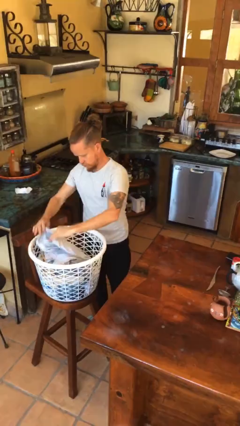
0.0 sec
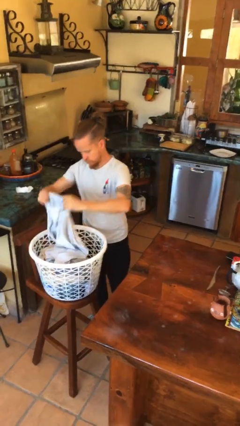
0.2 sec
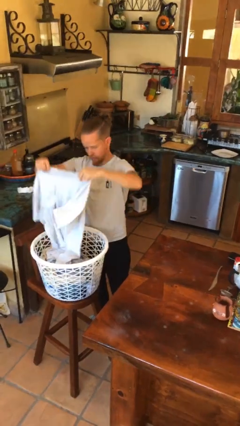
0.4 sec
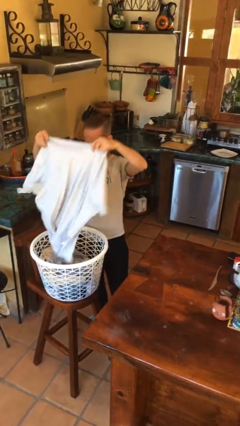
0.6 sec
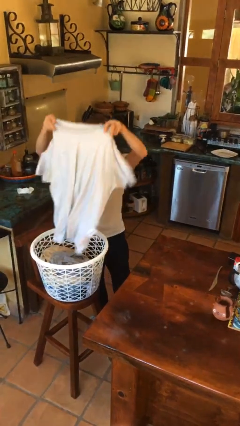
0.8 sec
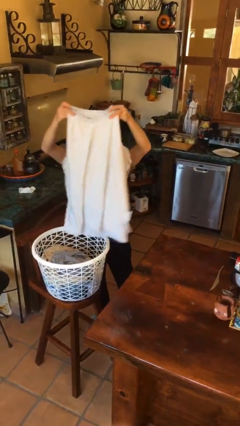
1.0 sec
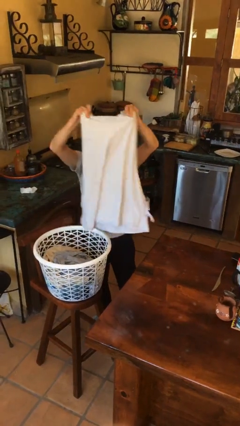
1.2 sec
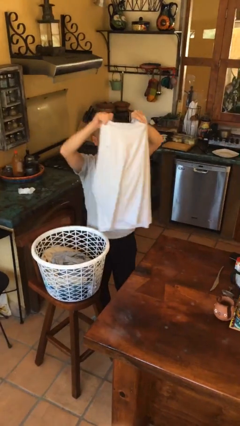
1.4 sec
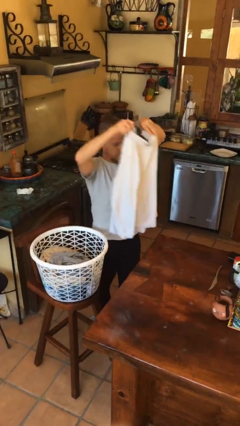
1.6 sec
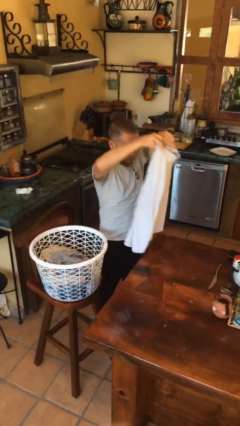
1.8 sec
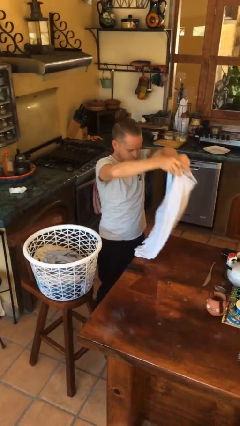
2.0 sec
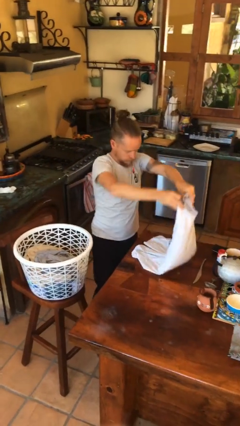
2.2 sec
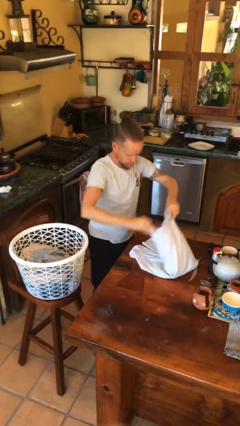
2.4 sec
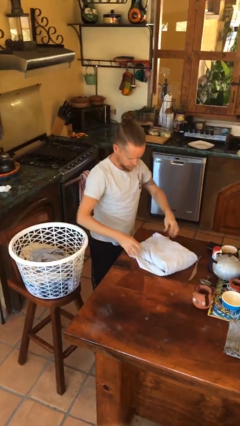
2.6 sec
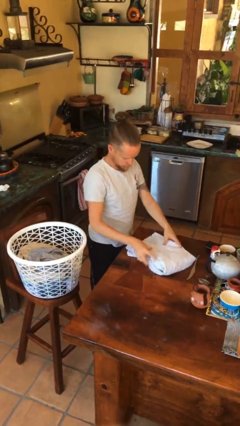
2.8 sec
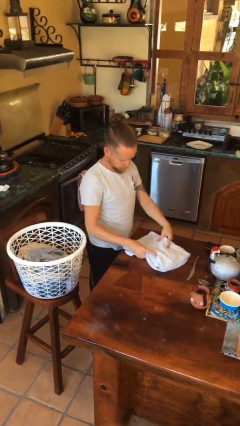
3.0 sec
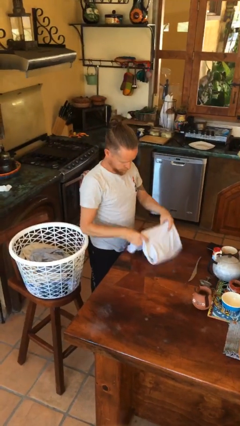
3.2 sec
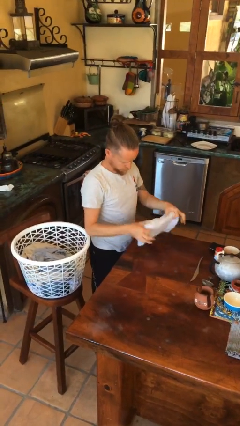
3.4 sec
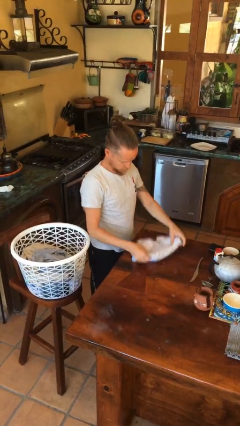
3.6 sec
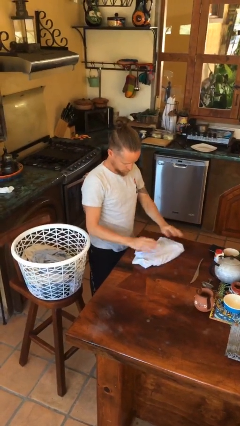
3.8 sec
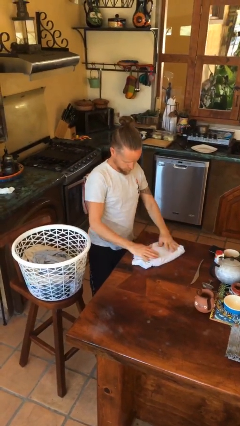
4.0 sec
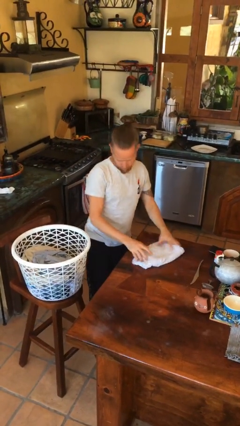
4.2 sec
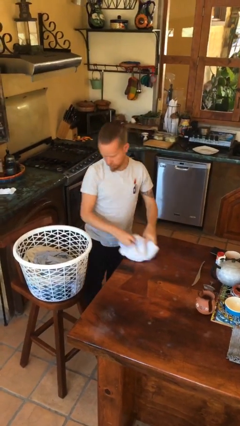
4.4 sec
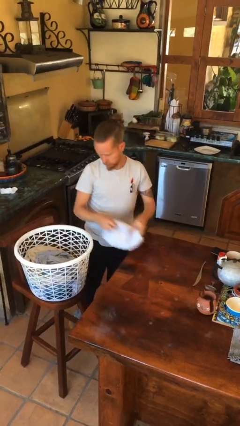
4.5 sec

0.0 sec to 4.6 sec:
person folds shirt

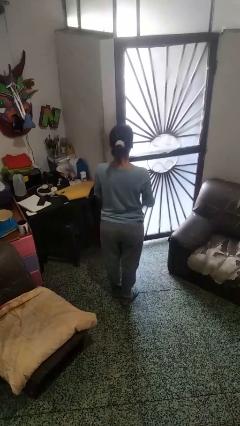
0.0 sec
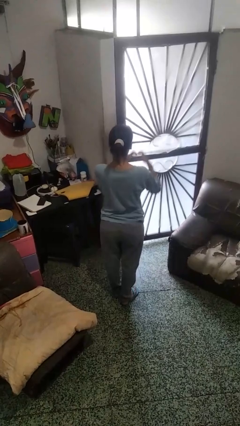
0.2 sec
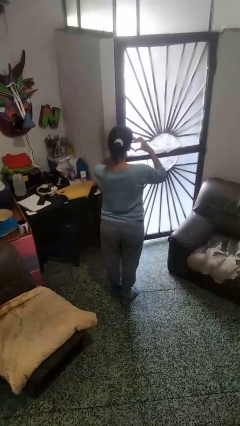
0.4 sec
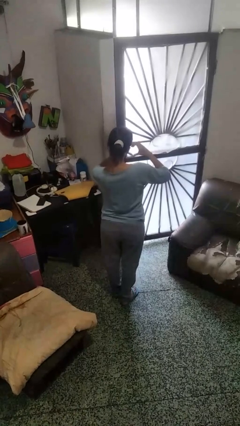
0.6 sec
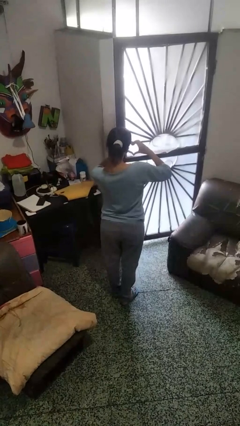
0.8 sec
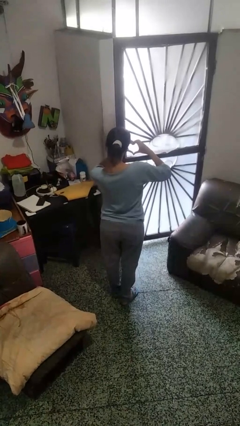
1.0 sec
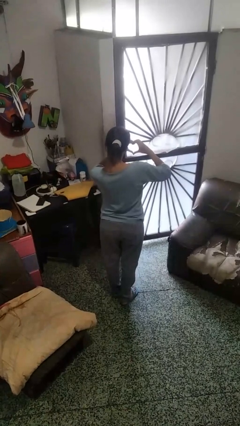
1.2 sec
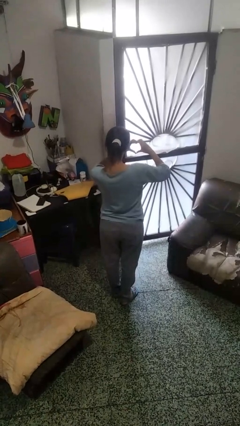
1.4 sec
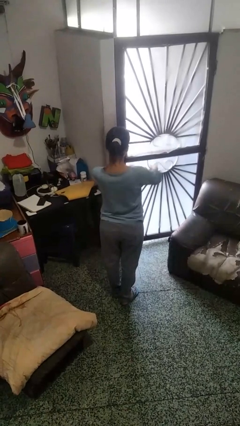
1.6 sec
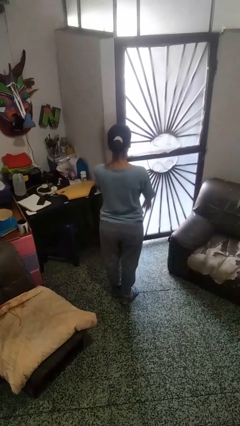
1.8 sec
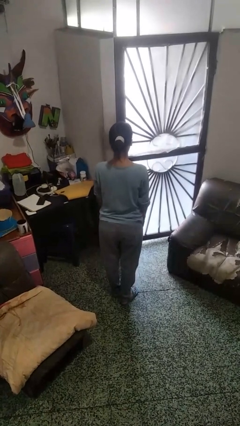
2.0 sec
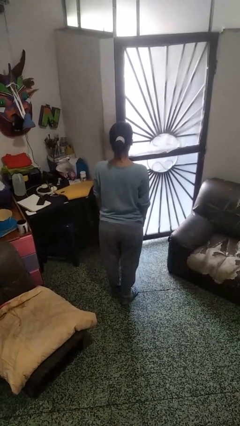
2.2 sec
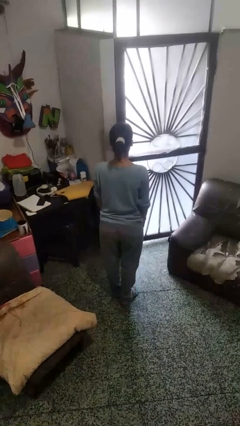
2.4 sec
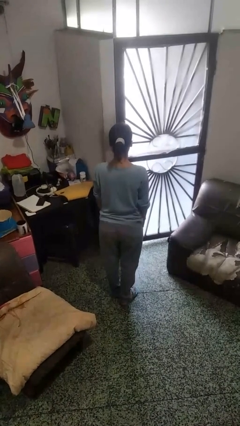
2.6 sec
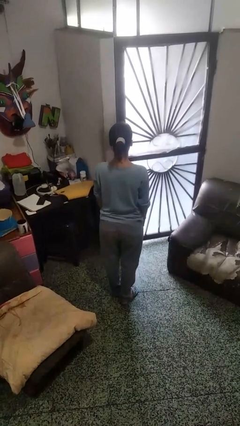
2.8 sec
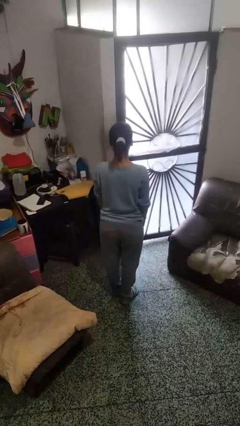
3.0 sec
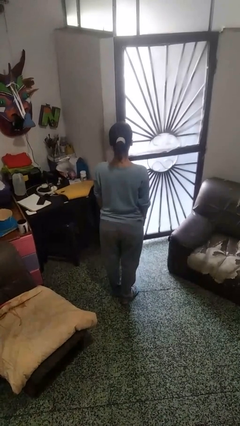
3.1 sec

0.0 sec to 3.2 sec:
person gestures heart

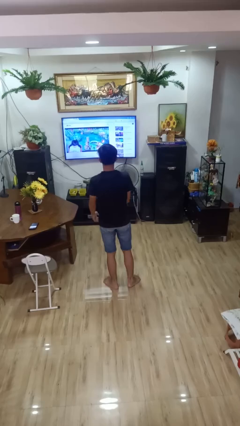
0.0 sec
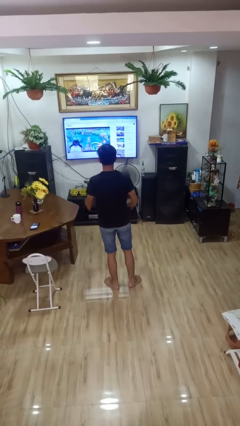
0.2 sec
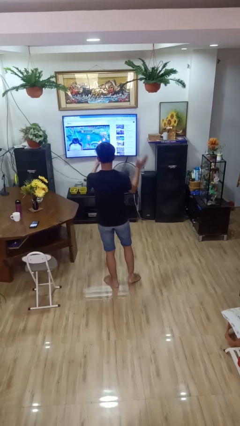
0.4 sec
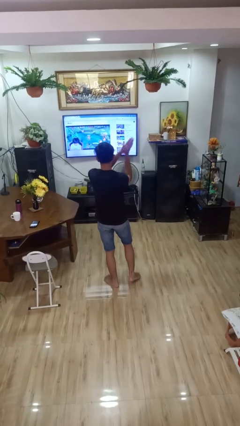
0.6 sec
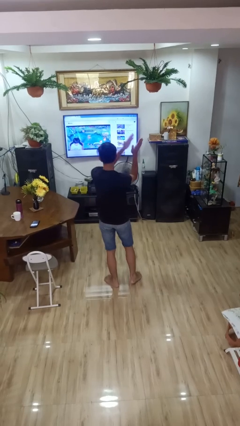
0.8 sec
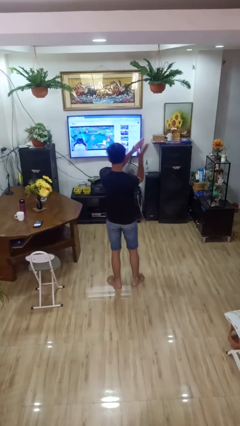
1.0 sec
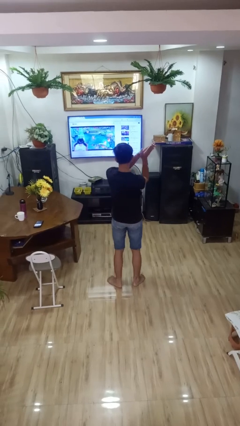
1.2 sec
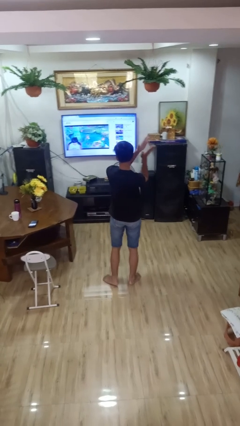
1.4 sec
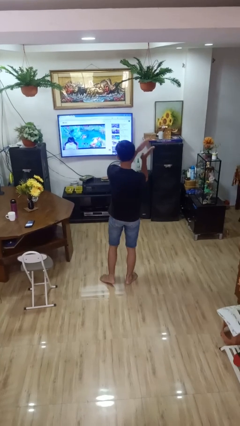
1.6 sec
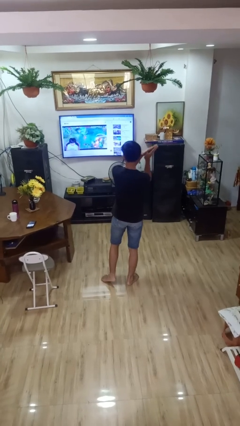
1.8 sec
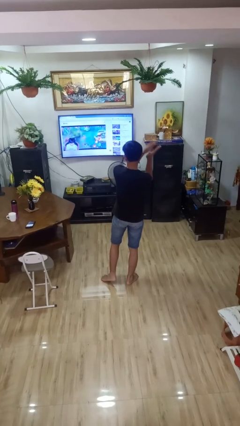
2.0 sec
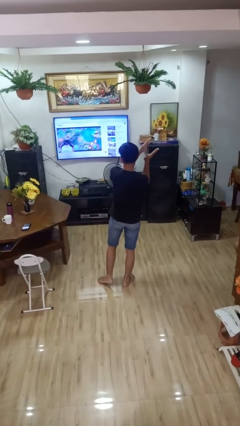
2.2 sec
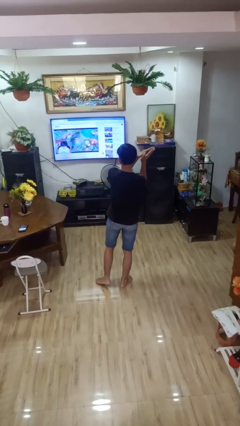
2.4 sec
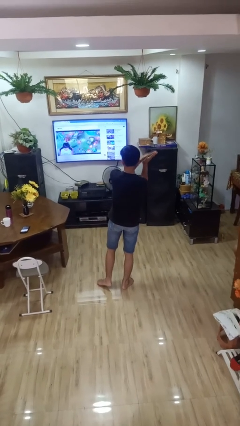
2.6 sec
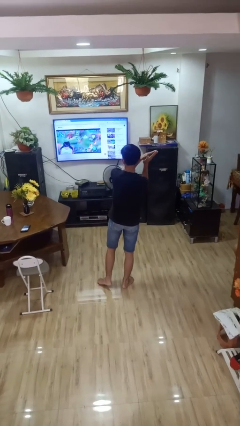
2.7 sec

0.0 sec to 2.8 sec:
person claps hands

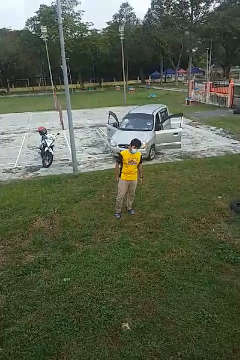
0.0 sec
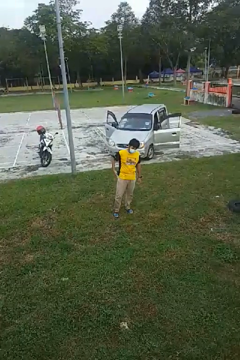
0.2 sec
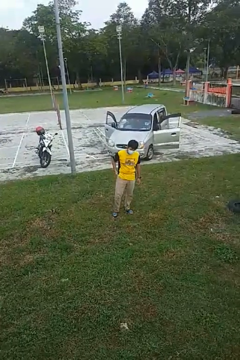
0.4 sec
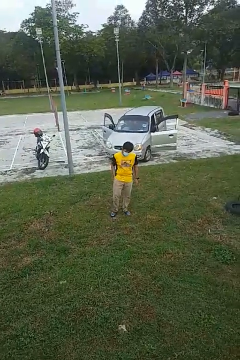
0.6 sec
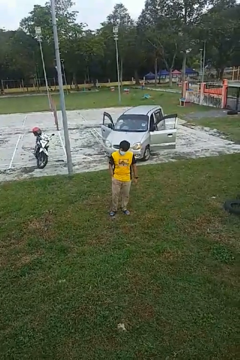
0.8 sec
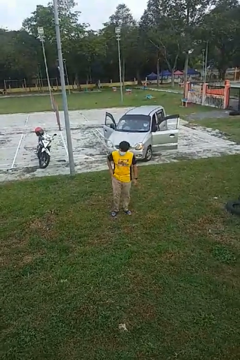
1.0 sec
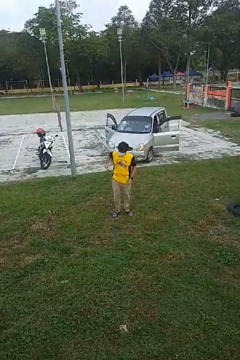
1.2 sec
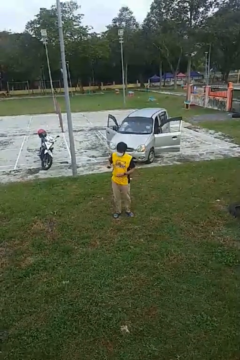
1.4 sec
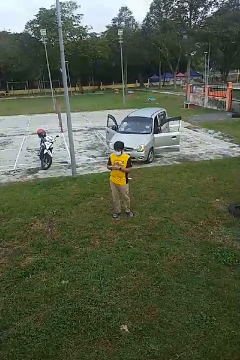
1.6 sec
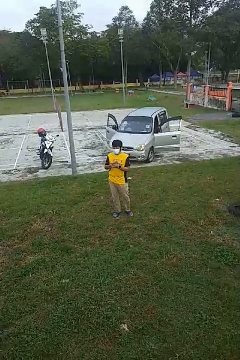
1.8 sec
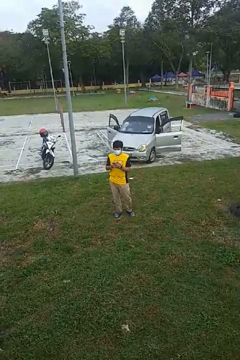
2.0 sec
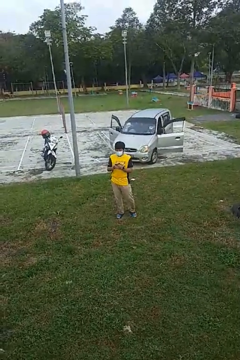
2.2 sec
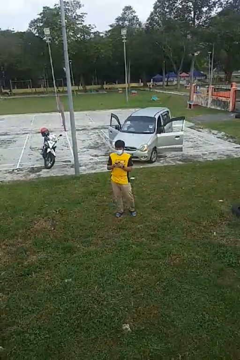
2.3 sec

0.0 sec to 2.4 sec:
person takes phone from pocket

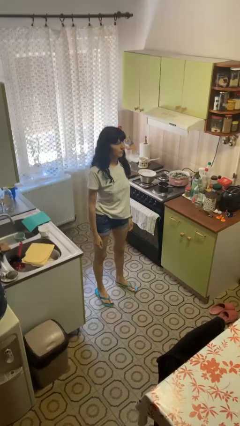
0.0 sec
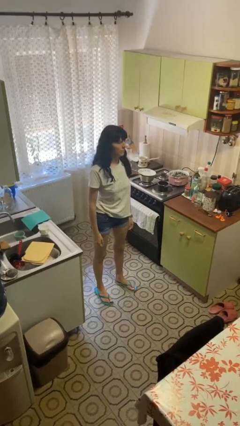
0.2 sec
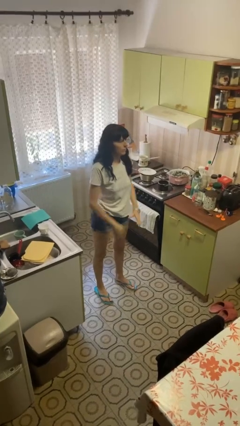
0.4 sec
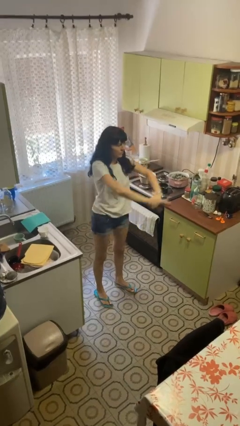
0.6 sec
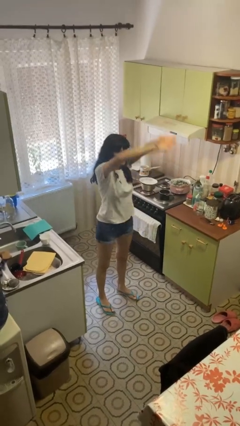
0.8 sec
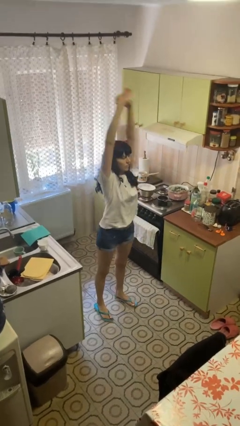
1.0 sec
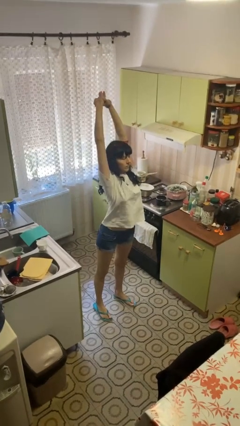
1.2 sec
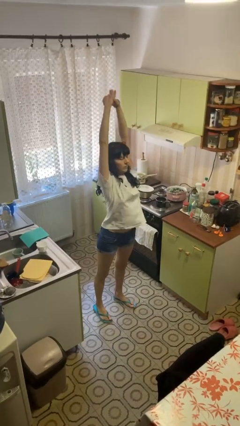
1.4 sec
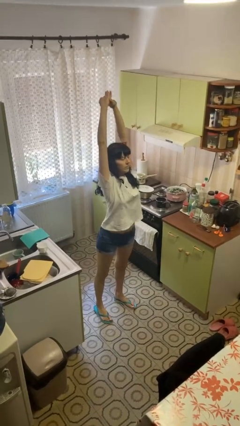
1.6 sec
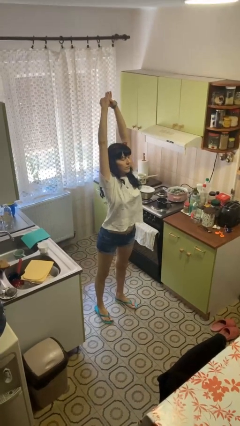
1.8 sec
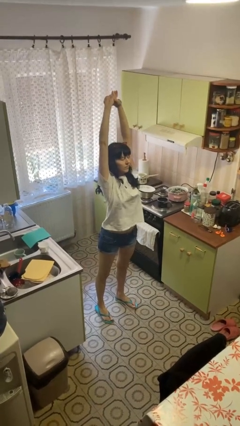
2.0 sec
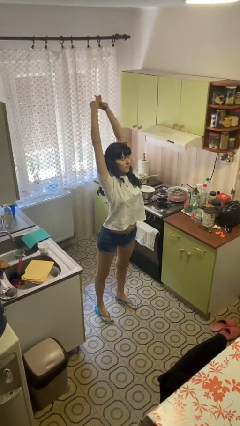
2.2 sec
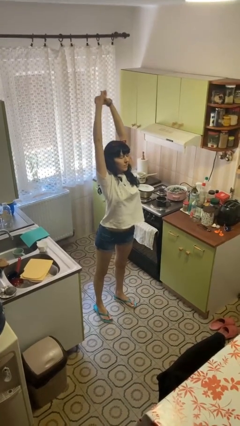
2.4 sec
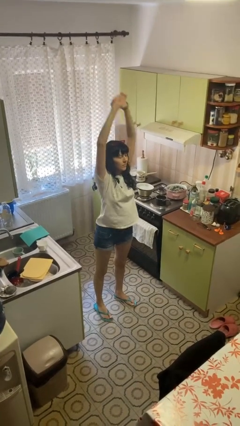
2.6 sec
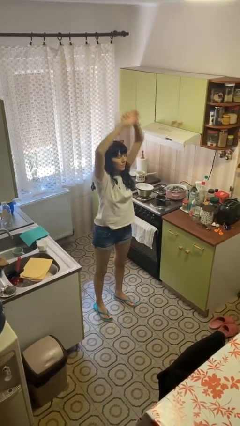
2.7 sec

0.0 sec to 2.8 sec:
person stretches arms over head

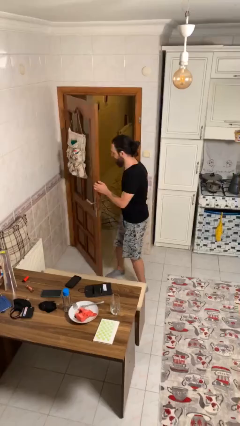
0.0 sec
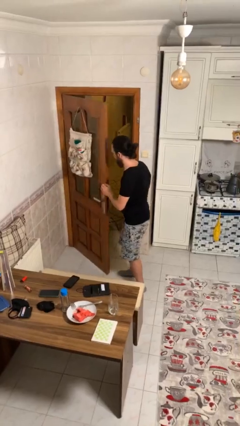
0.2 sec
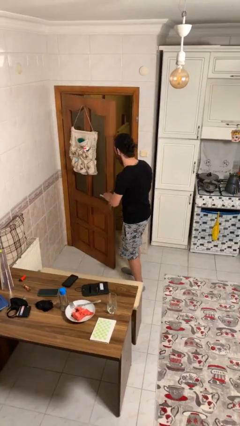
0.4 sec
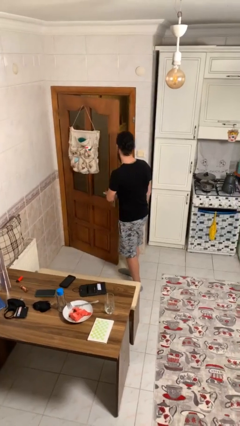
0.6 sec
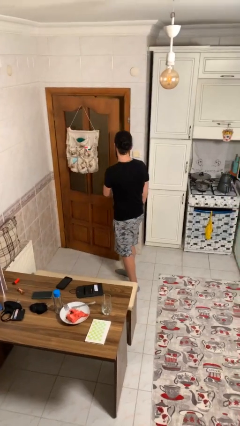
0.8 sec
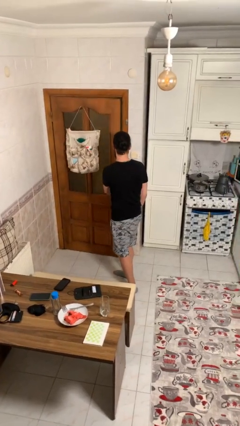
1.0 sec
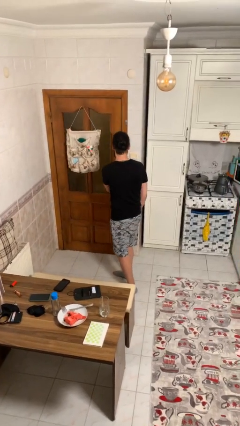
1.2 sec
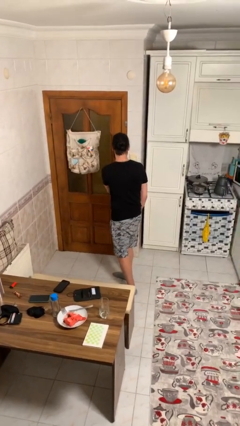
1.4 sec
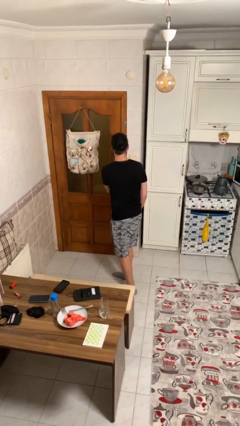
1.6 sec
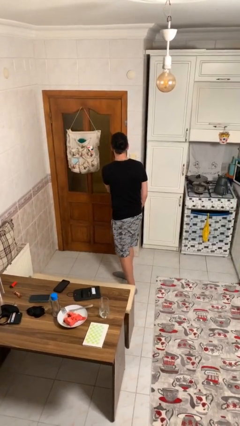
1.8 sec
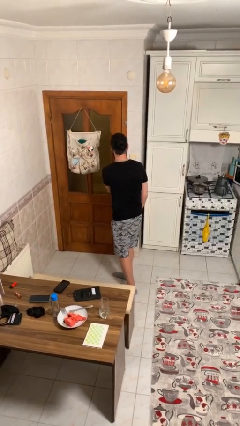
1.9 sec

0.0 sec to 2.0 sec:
person closes facility door

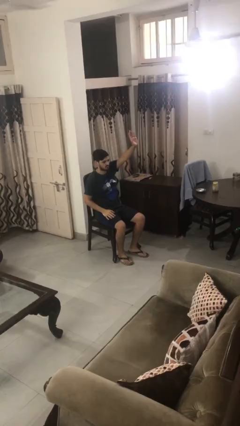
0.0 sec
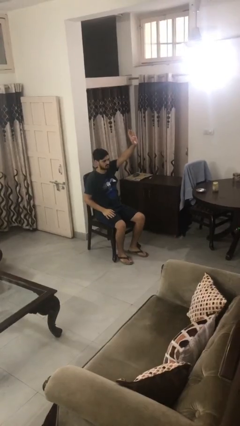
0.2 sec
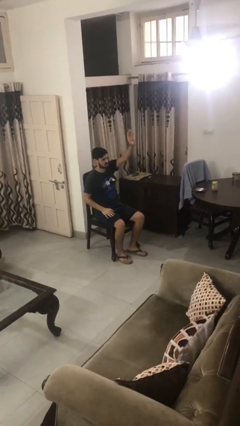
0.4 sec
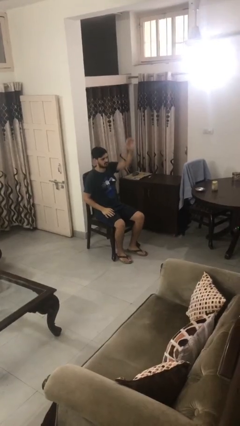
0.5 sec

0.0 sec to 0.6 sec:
person gestures lower hand
